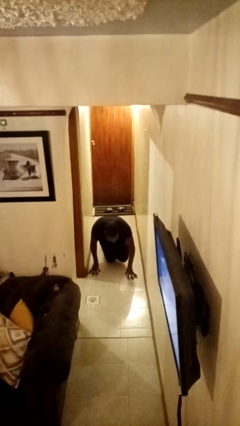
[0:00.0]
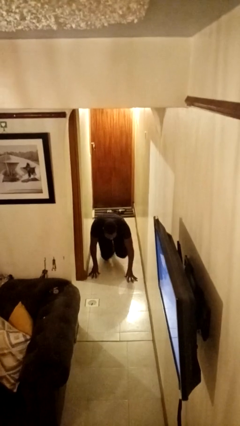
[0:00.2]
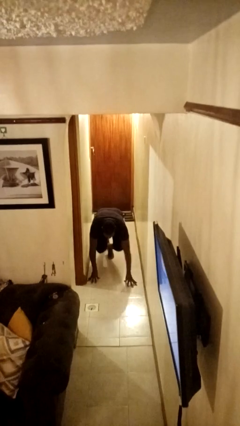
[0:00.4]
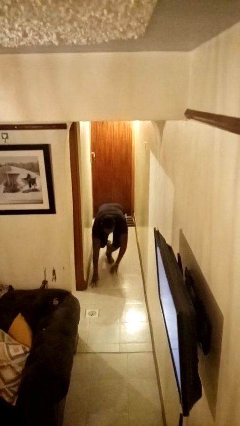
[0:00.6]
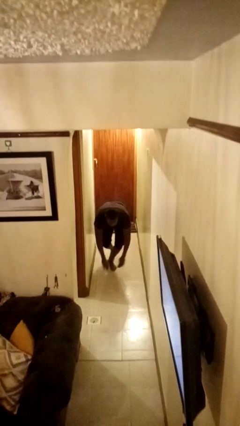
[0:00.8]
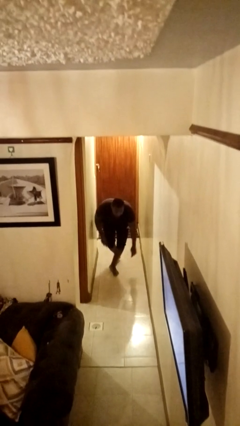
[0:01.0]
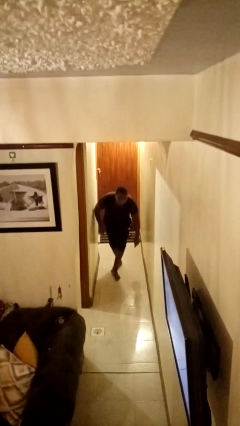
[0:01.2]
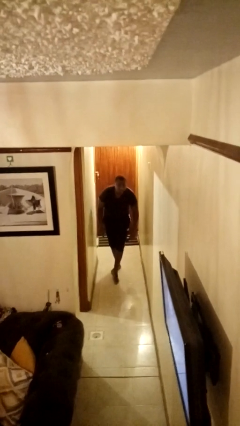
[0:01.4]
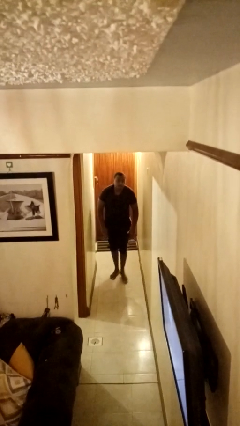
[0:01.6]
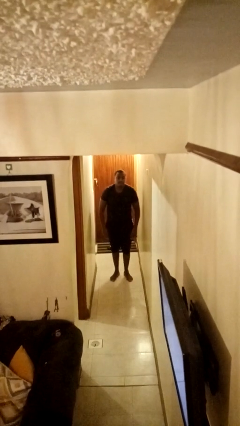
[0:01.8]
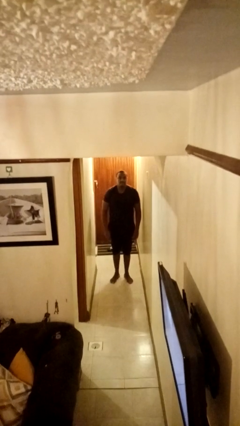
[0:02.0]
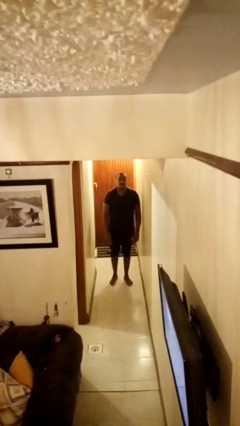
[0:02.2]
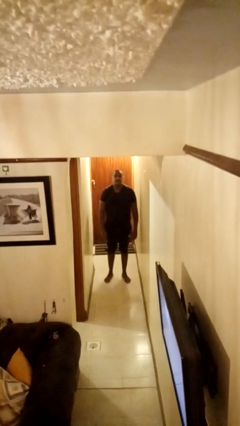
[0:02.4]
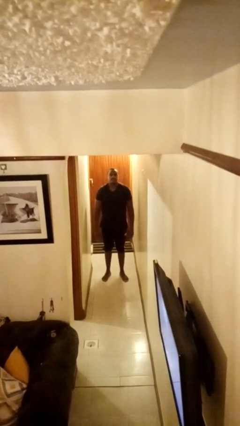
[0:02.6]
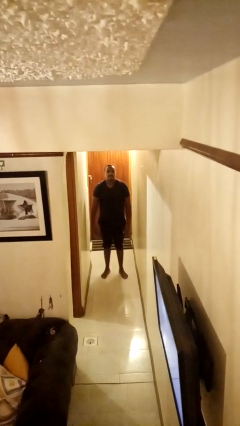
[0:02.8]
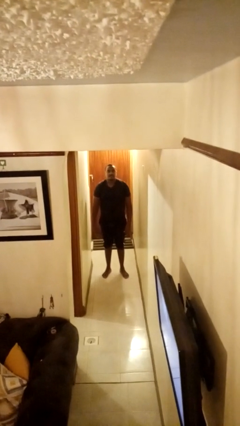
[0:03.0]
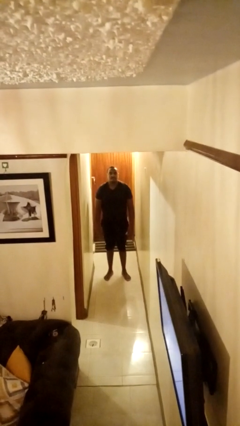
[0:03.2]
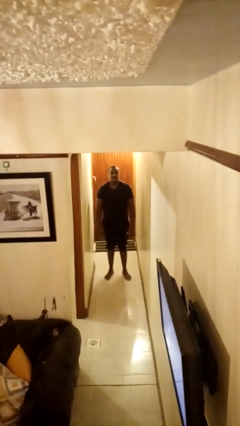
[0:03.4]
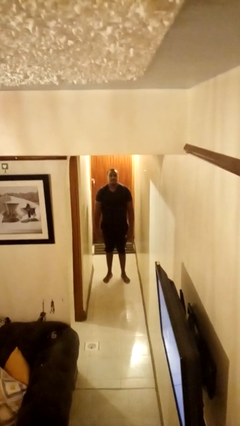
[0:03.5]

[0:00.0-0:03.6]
person stands up from floor

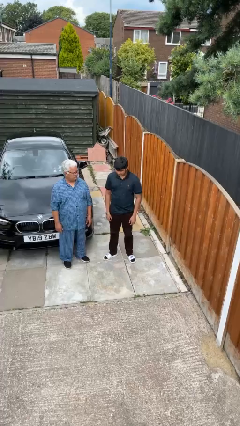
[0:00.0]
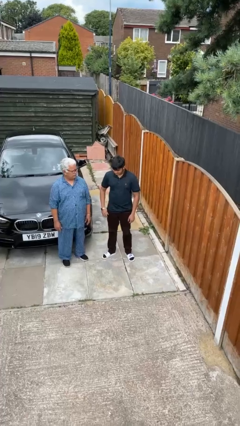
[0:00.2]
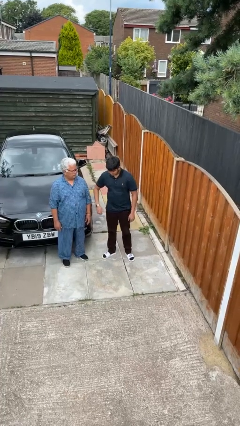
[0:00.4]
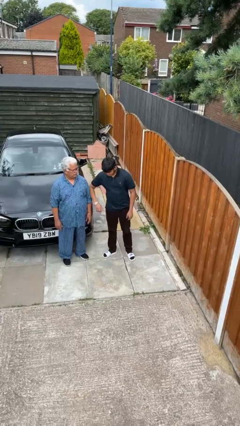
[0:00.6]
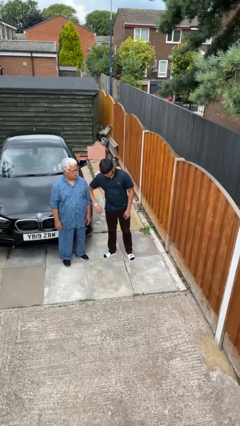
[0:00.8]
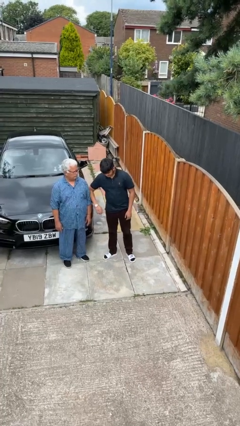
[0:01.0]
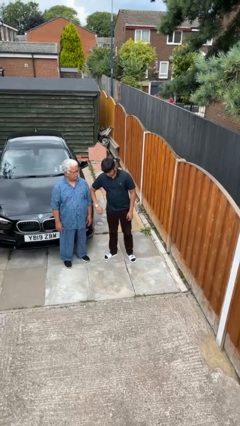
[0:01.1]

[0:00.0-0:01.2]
person nudges person with elbow

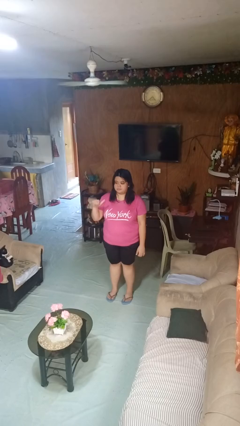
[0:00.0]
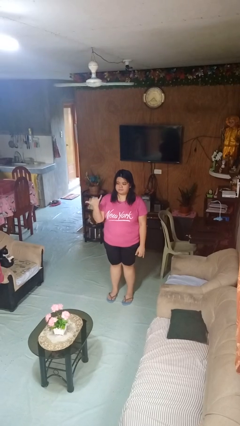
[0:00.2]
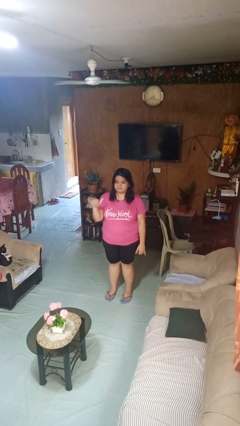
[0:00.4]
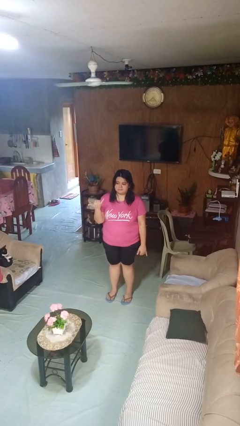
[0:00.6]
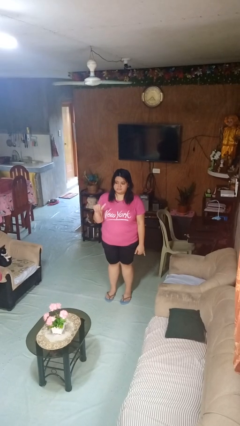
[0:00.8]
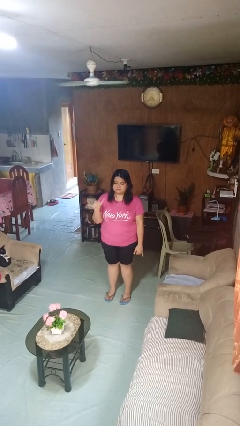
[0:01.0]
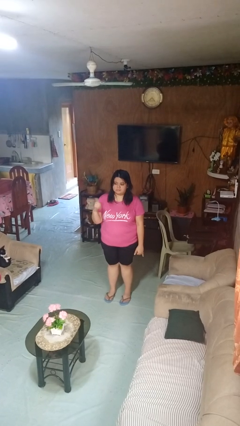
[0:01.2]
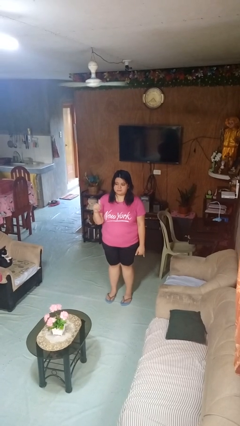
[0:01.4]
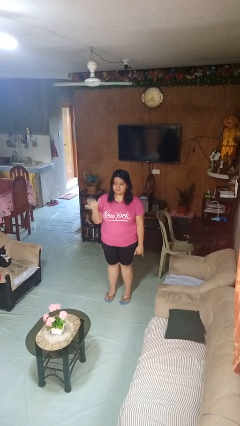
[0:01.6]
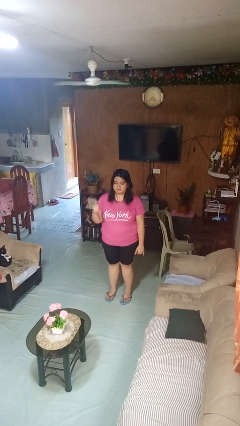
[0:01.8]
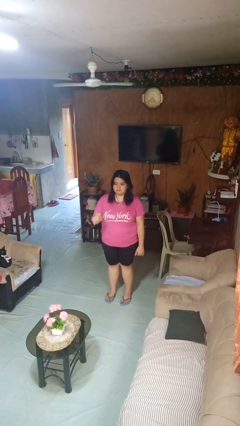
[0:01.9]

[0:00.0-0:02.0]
person gestures hang loose

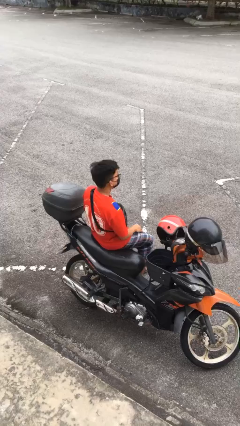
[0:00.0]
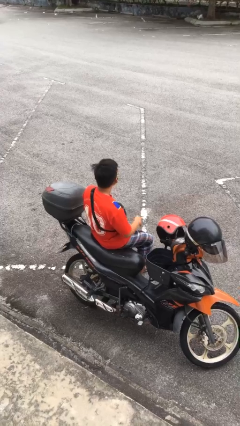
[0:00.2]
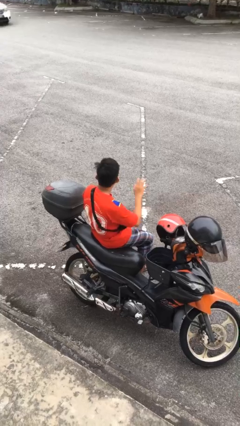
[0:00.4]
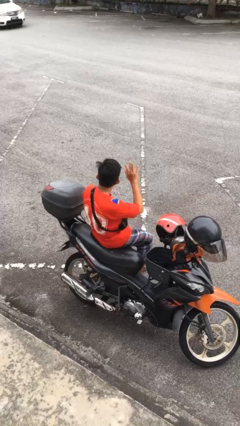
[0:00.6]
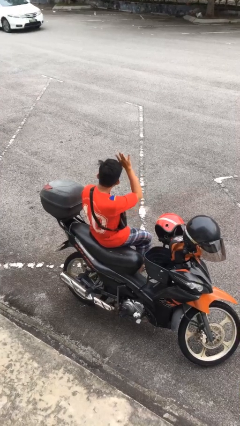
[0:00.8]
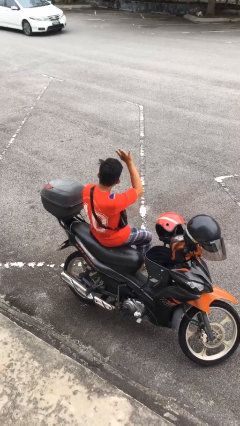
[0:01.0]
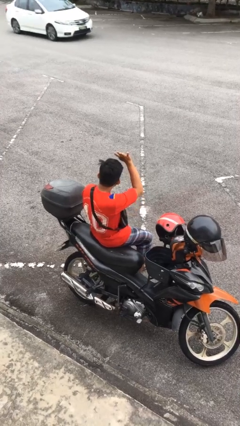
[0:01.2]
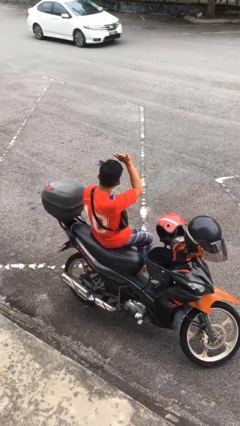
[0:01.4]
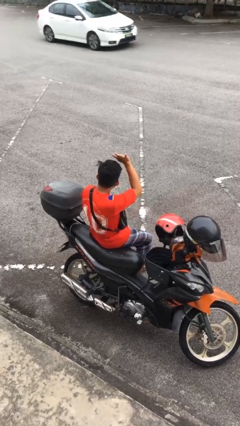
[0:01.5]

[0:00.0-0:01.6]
person gestures raise hand

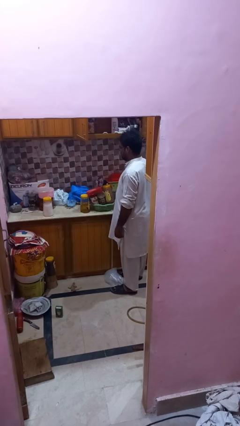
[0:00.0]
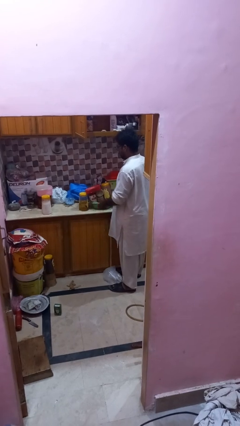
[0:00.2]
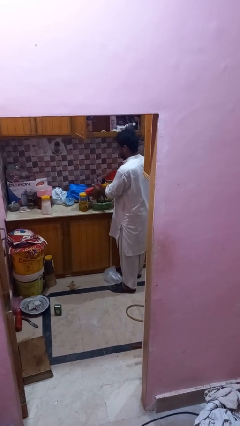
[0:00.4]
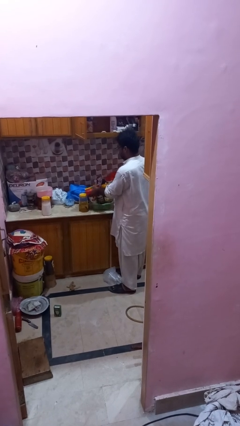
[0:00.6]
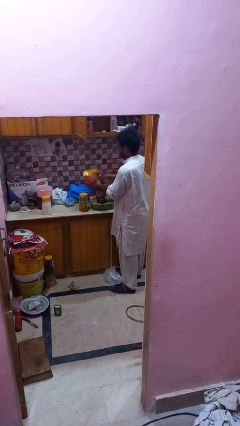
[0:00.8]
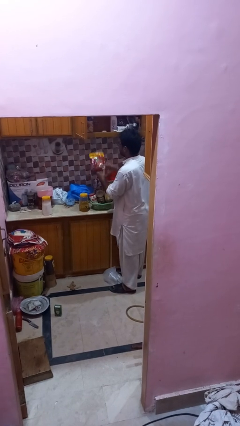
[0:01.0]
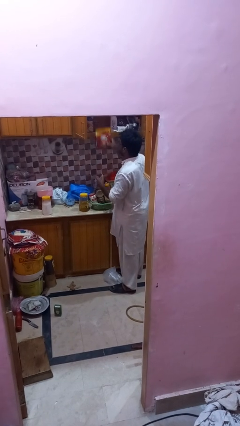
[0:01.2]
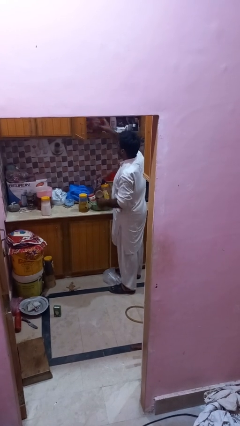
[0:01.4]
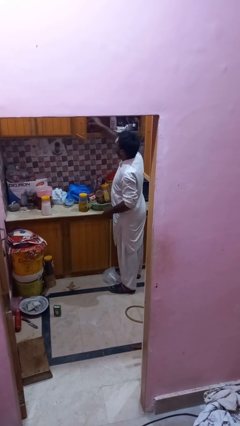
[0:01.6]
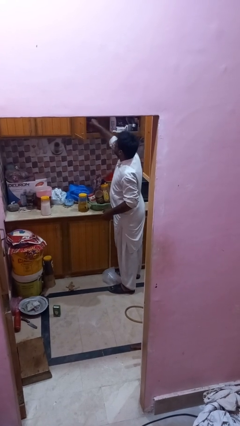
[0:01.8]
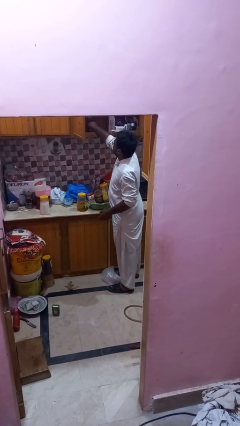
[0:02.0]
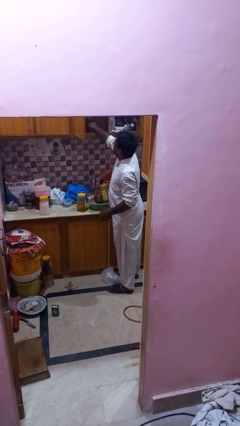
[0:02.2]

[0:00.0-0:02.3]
person loads groceries into cabinet

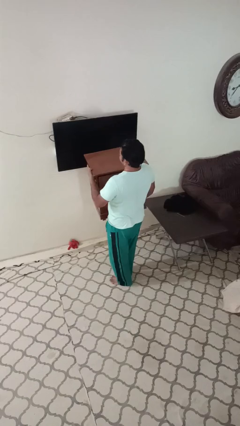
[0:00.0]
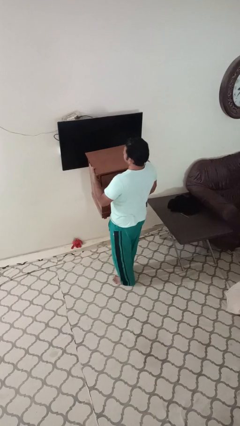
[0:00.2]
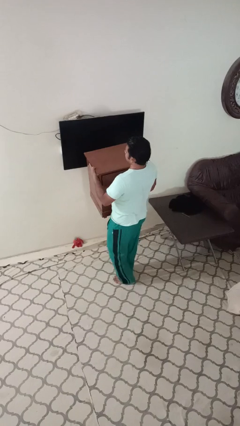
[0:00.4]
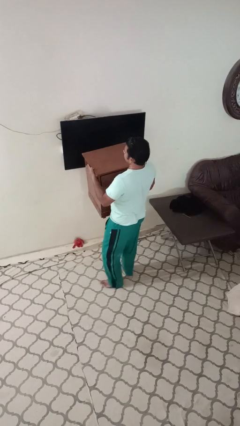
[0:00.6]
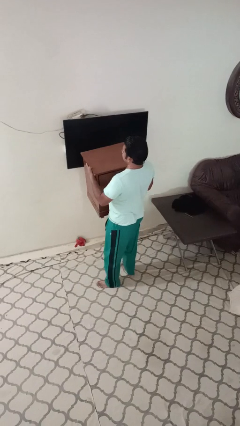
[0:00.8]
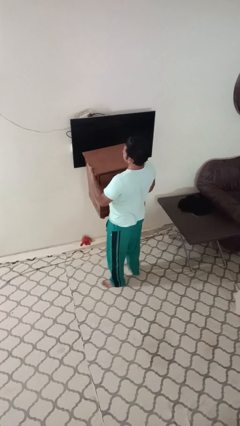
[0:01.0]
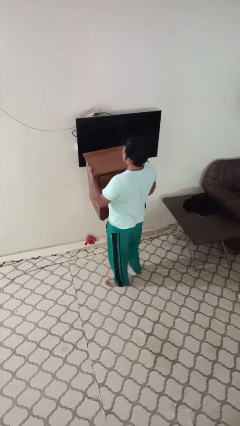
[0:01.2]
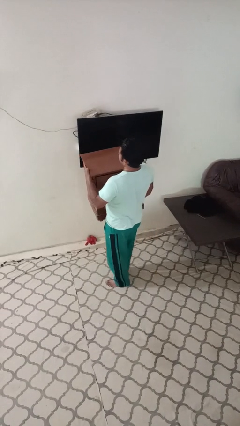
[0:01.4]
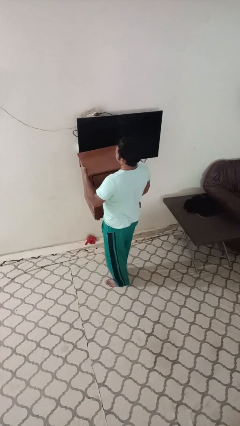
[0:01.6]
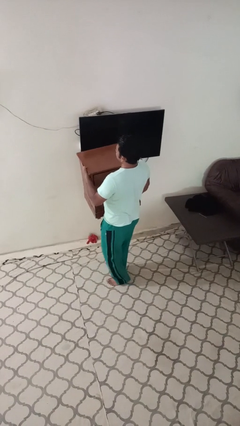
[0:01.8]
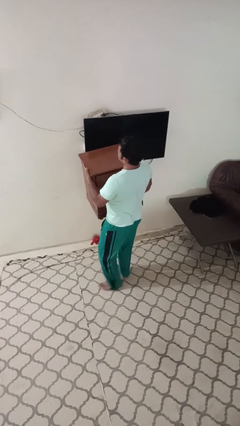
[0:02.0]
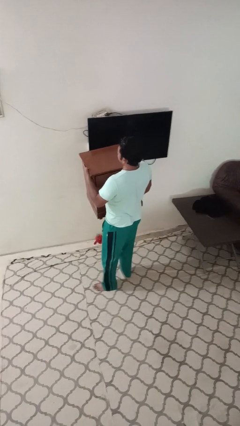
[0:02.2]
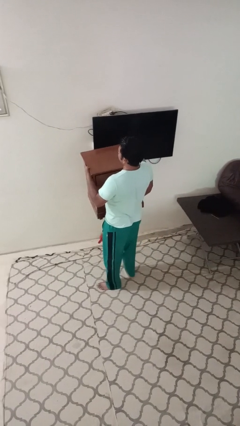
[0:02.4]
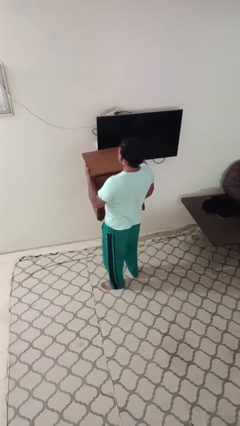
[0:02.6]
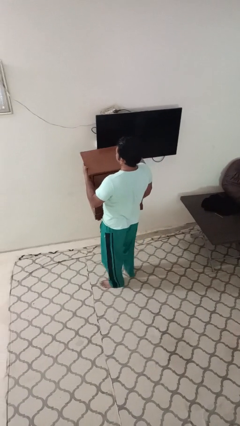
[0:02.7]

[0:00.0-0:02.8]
person carries furniture

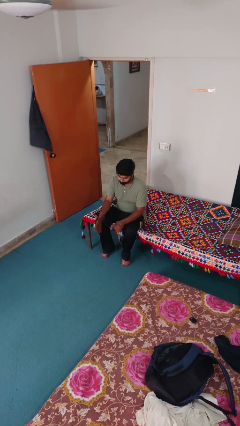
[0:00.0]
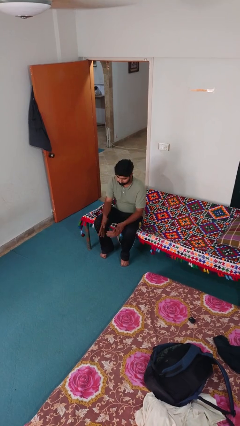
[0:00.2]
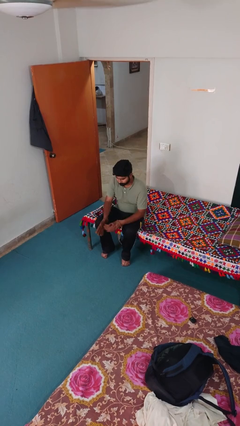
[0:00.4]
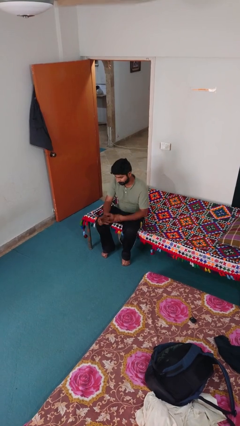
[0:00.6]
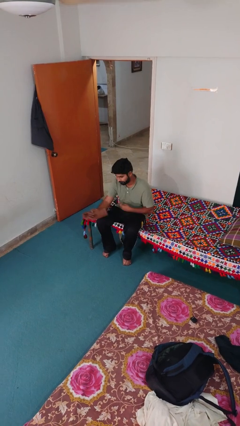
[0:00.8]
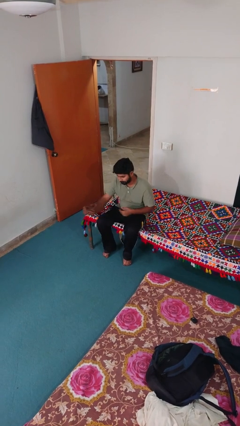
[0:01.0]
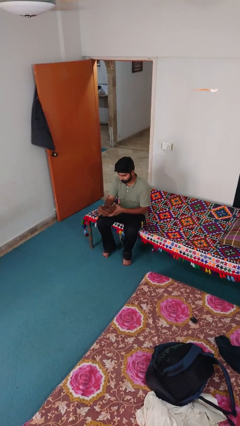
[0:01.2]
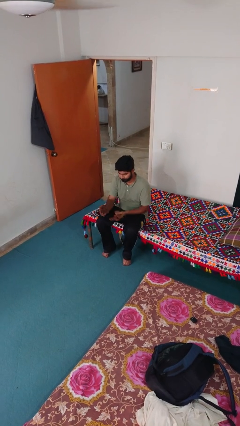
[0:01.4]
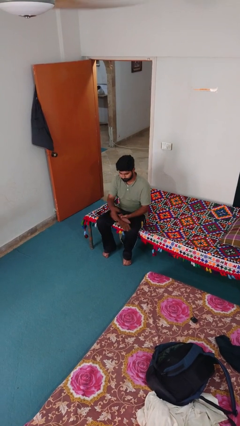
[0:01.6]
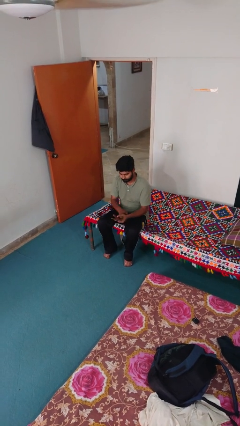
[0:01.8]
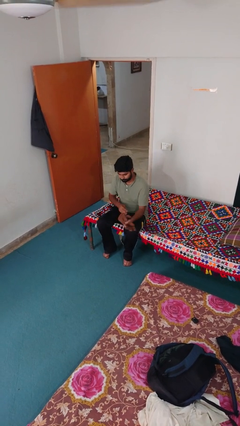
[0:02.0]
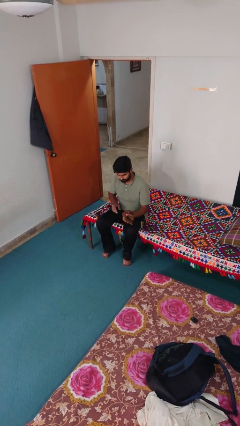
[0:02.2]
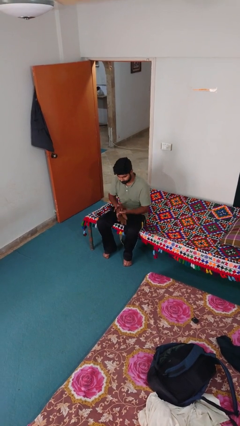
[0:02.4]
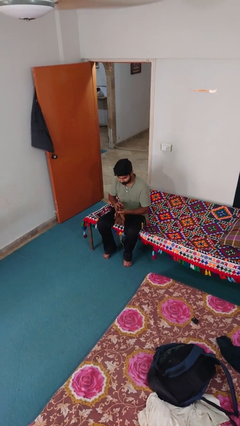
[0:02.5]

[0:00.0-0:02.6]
person takes off gloves

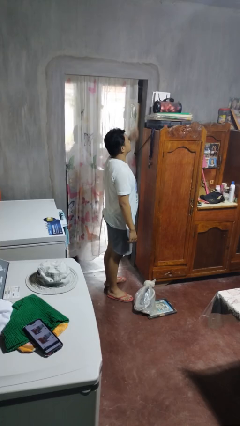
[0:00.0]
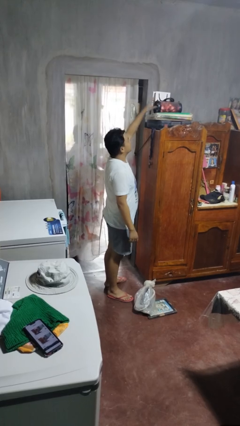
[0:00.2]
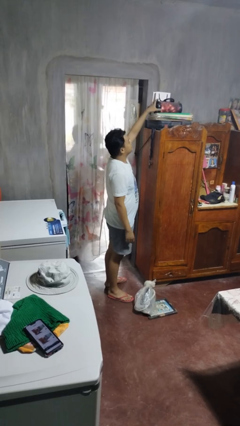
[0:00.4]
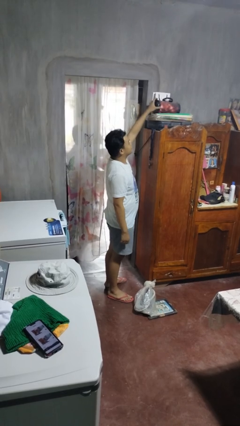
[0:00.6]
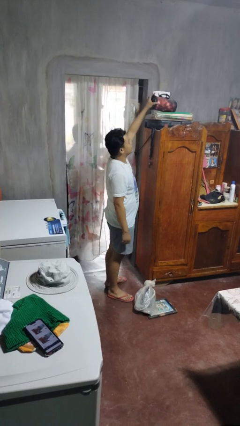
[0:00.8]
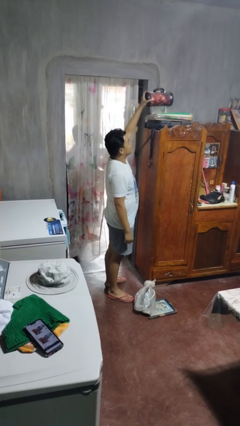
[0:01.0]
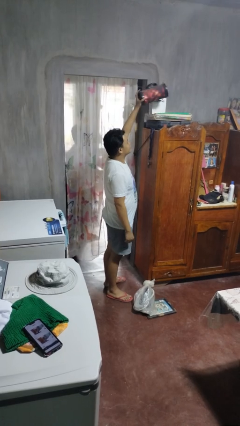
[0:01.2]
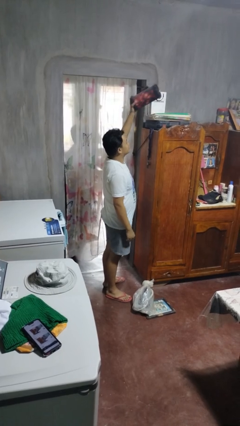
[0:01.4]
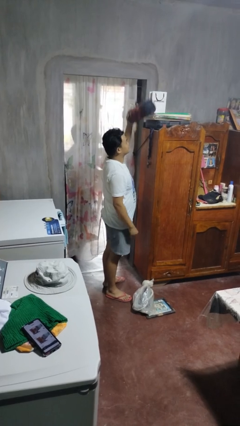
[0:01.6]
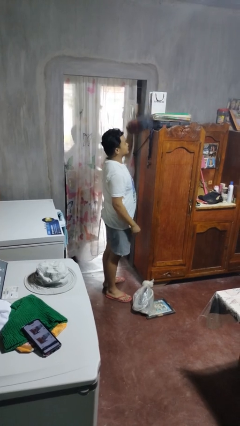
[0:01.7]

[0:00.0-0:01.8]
person picks up object from shelf
